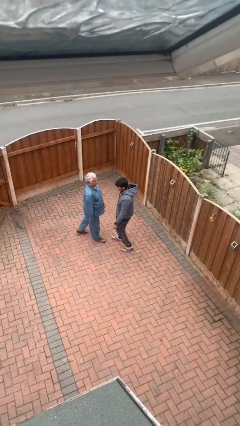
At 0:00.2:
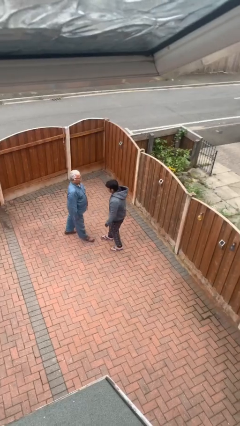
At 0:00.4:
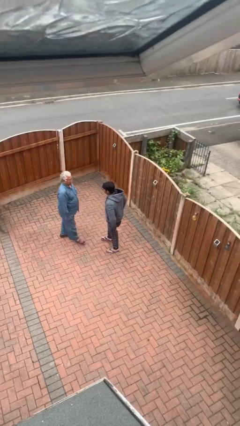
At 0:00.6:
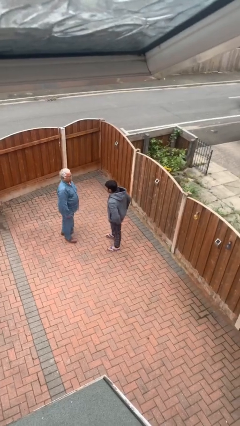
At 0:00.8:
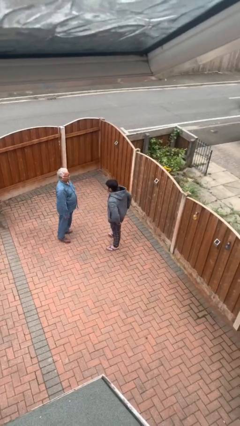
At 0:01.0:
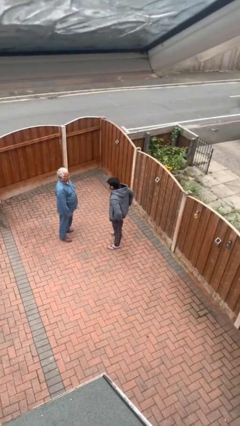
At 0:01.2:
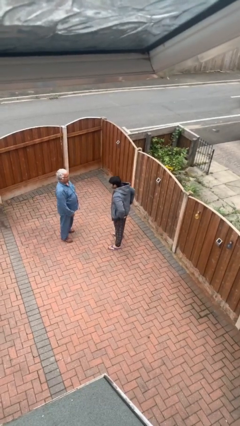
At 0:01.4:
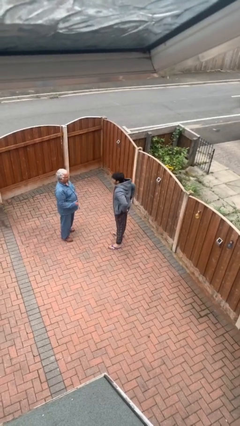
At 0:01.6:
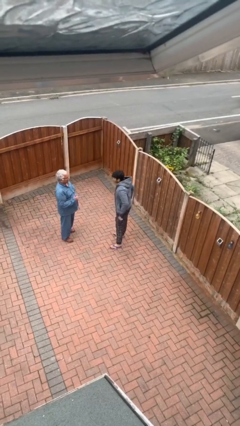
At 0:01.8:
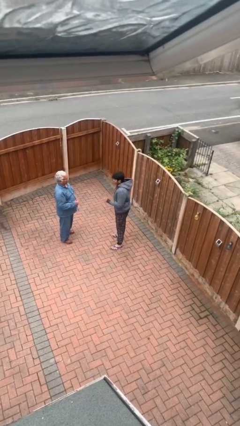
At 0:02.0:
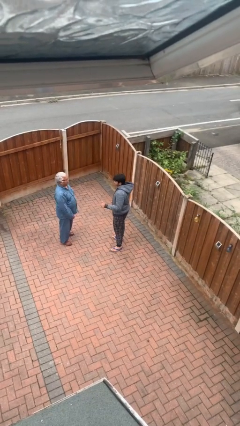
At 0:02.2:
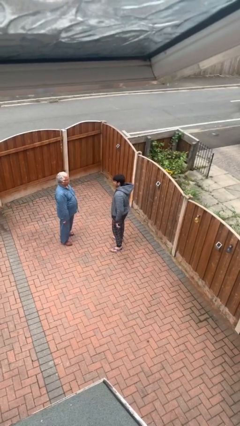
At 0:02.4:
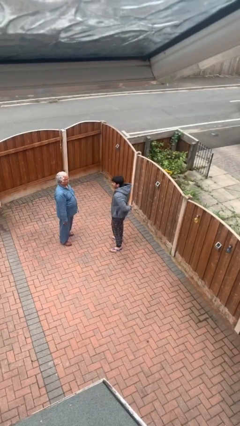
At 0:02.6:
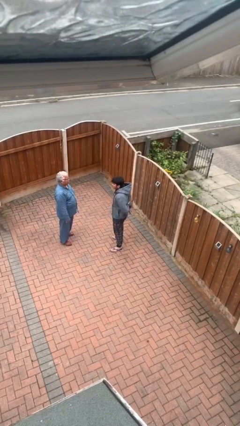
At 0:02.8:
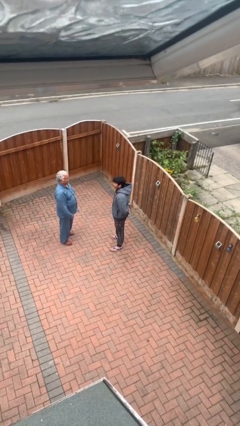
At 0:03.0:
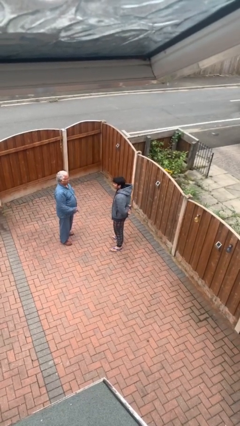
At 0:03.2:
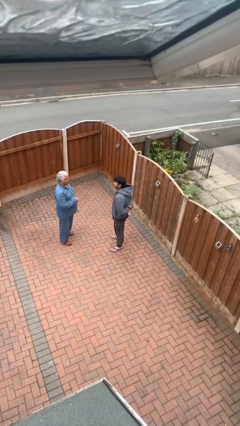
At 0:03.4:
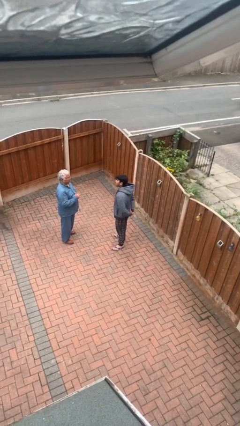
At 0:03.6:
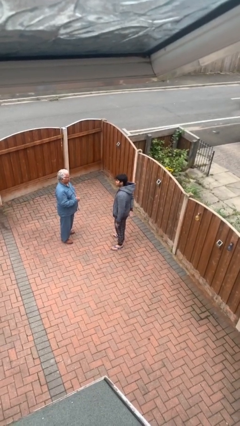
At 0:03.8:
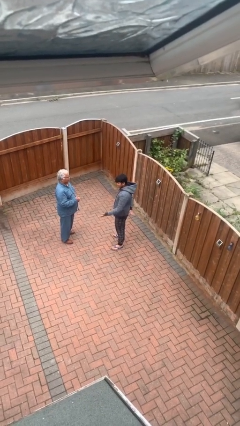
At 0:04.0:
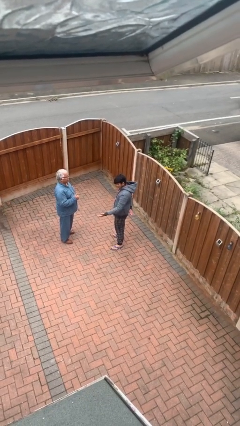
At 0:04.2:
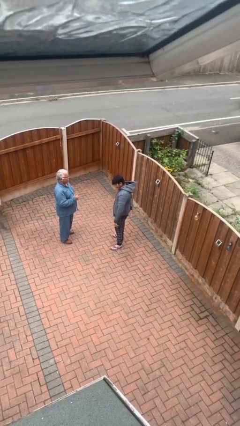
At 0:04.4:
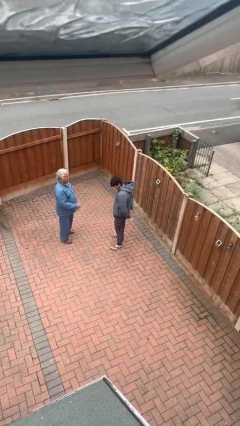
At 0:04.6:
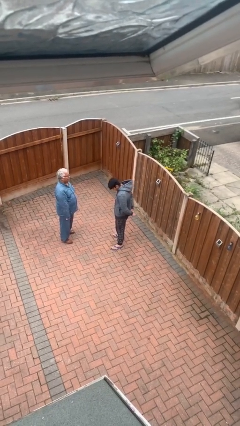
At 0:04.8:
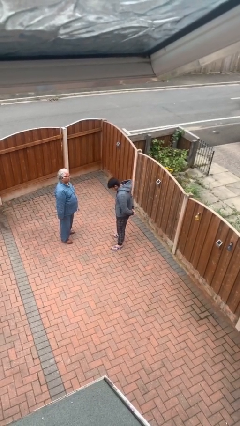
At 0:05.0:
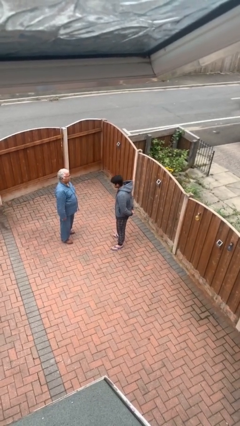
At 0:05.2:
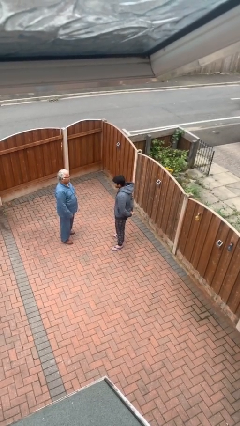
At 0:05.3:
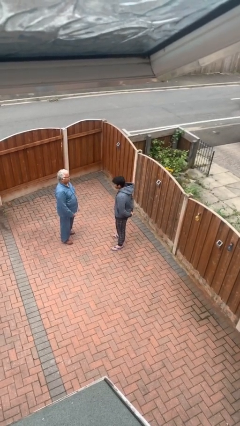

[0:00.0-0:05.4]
person talks to person

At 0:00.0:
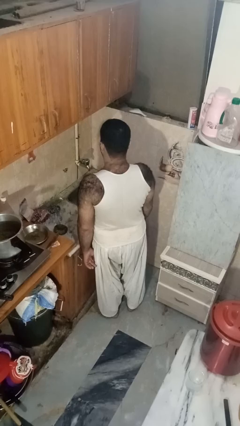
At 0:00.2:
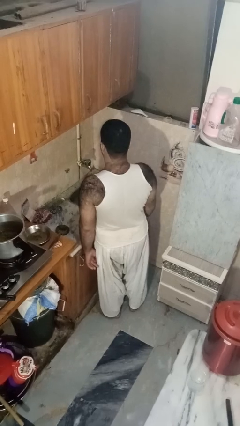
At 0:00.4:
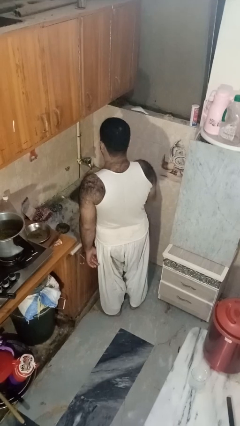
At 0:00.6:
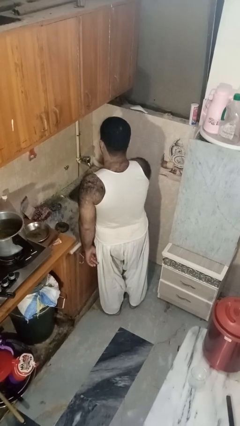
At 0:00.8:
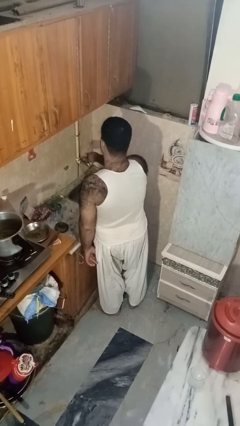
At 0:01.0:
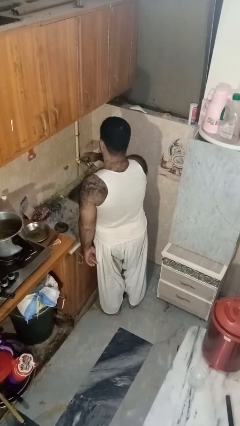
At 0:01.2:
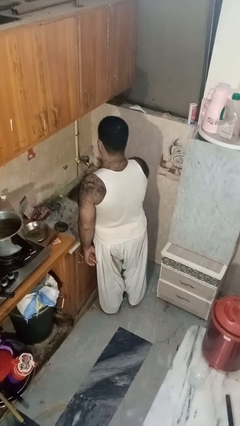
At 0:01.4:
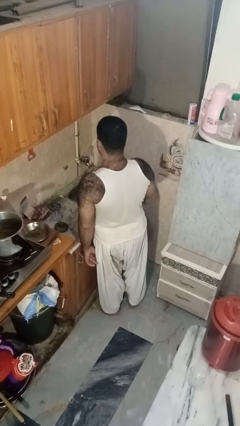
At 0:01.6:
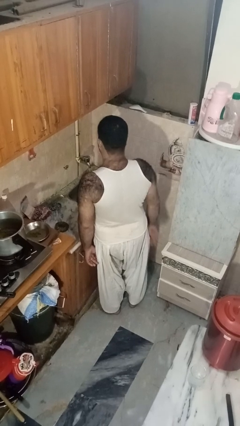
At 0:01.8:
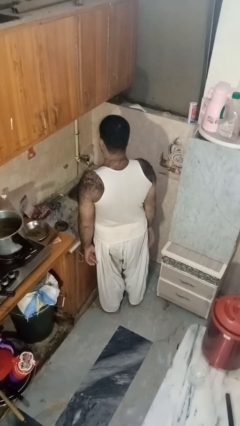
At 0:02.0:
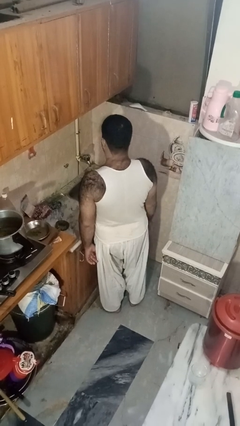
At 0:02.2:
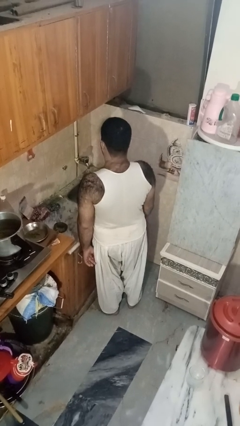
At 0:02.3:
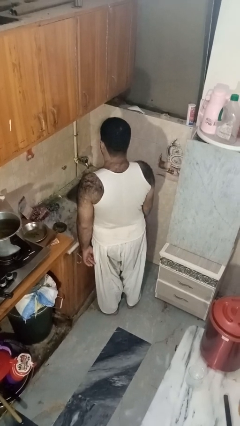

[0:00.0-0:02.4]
person turns on faucet

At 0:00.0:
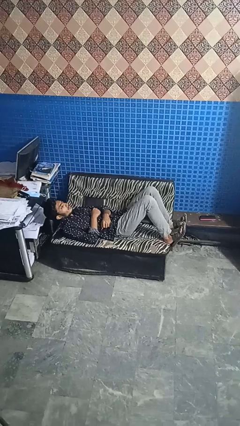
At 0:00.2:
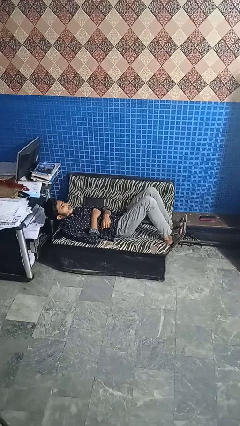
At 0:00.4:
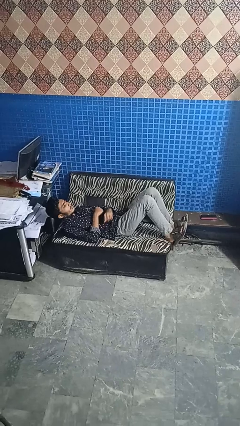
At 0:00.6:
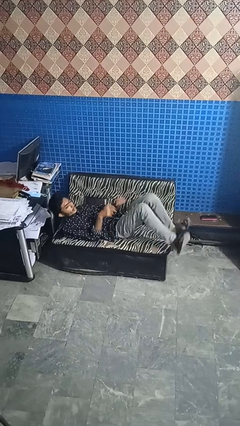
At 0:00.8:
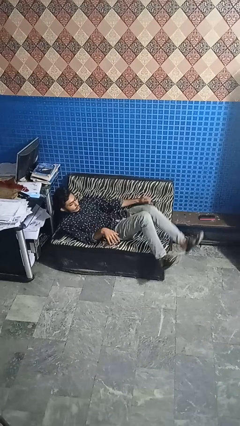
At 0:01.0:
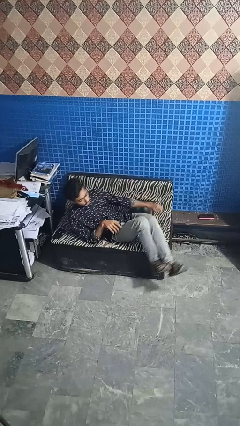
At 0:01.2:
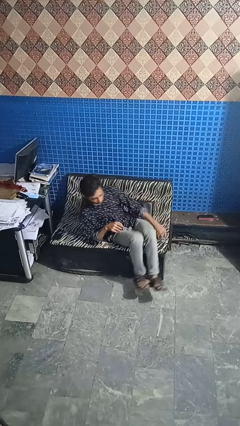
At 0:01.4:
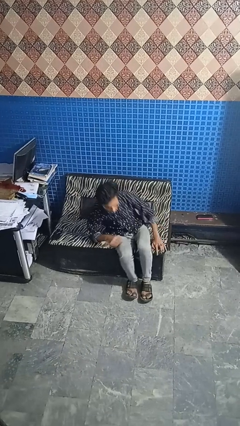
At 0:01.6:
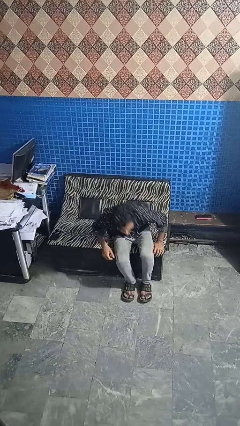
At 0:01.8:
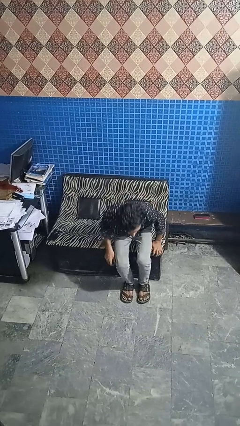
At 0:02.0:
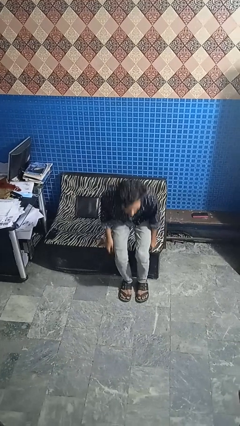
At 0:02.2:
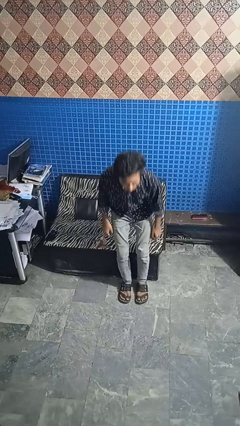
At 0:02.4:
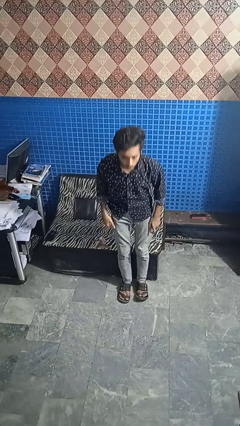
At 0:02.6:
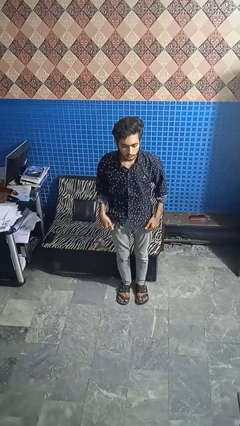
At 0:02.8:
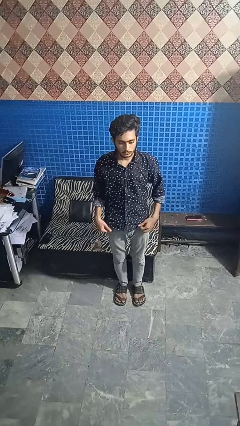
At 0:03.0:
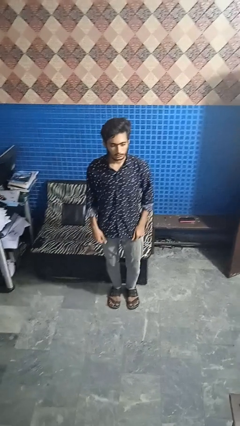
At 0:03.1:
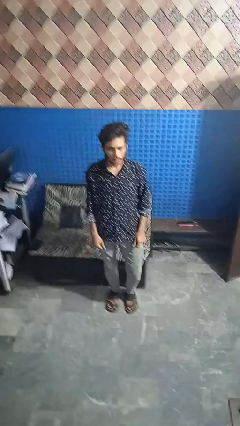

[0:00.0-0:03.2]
person stands up

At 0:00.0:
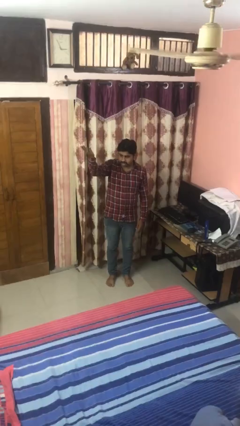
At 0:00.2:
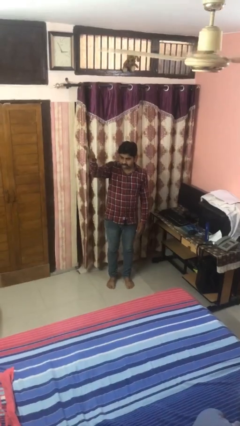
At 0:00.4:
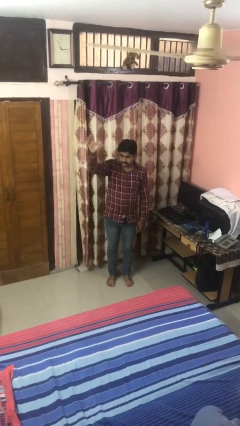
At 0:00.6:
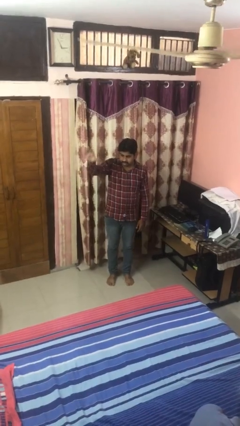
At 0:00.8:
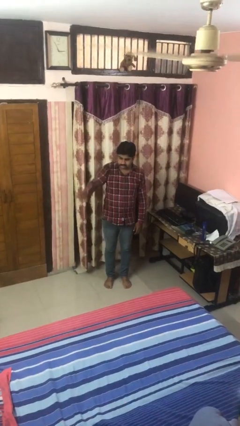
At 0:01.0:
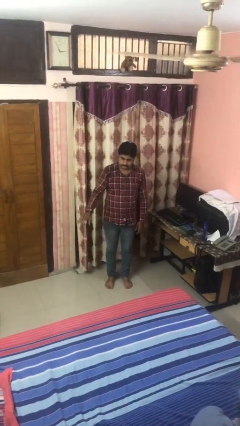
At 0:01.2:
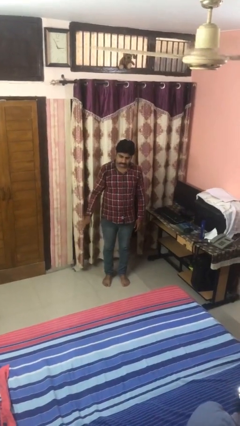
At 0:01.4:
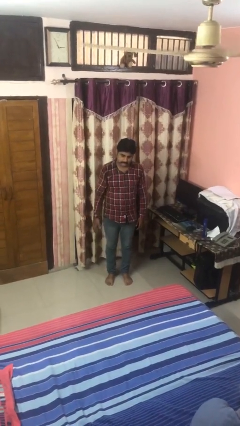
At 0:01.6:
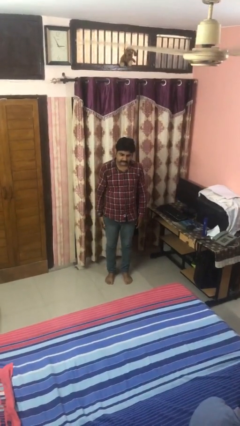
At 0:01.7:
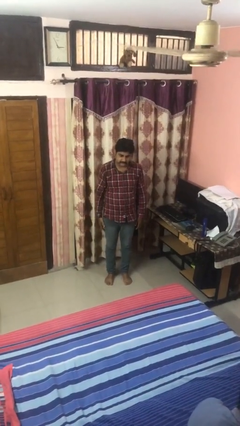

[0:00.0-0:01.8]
person gestures swipe down

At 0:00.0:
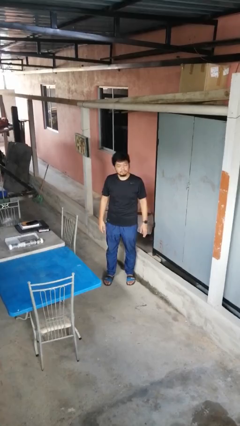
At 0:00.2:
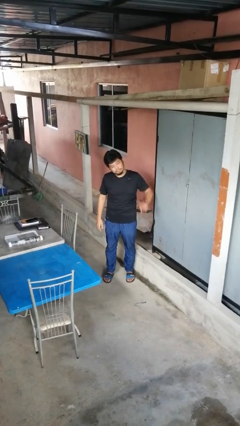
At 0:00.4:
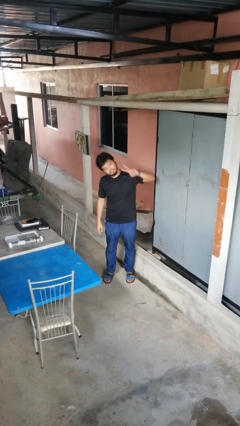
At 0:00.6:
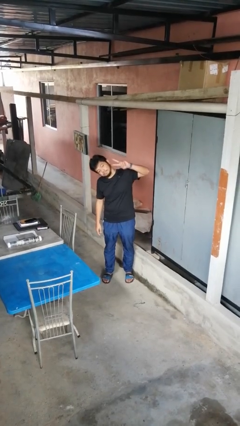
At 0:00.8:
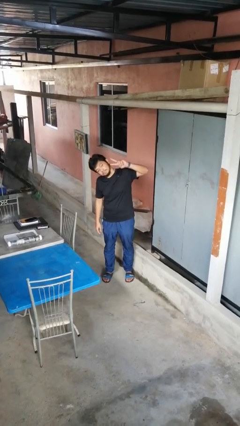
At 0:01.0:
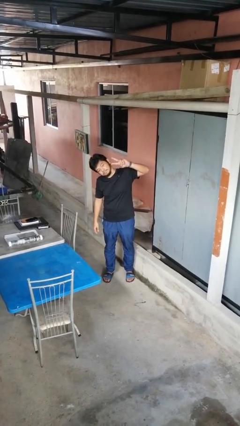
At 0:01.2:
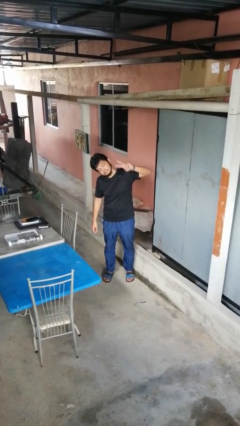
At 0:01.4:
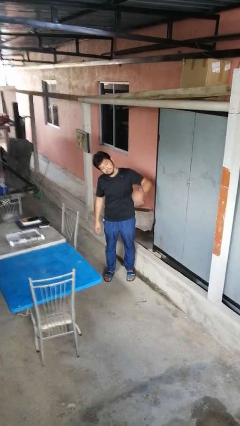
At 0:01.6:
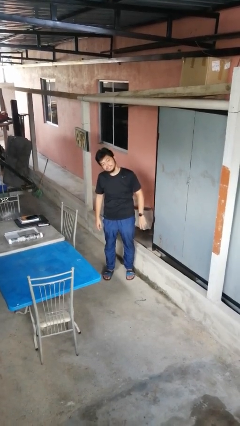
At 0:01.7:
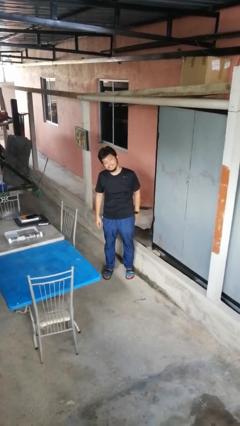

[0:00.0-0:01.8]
person gestures peace

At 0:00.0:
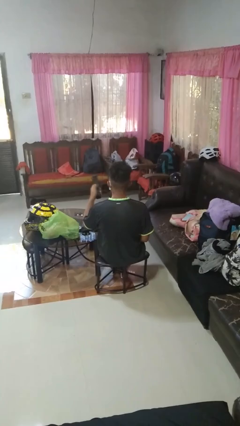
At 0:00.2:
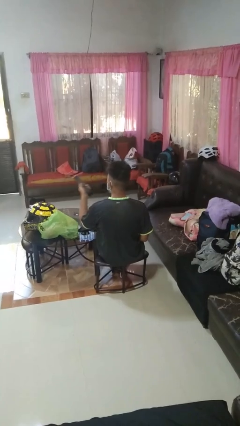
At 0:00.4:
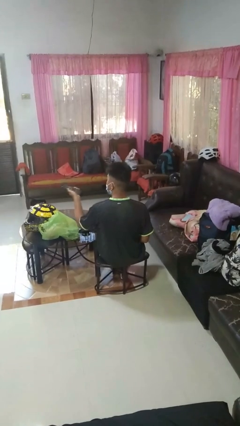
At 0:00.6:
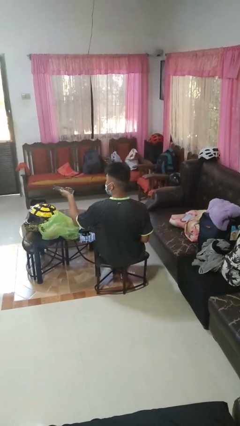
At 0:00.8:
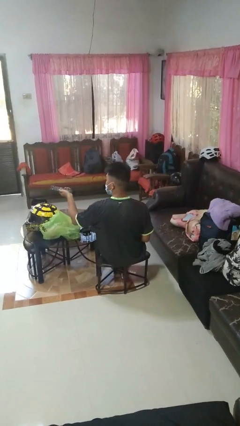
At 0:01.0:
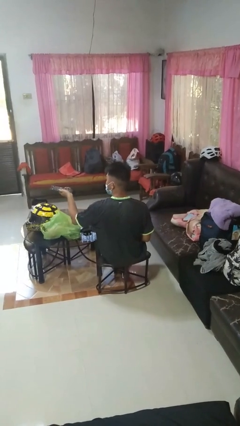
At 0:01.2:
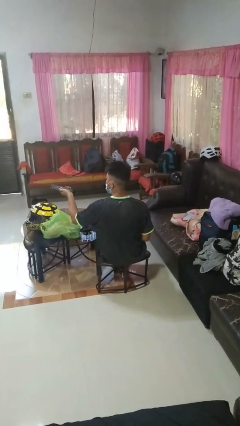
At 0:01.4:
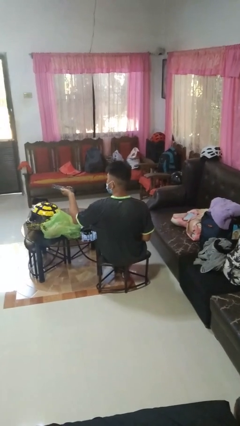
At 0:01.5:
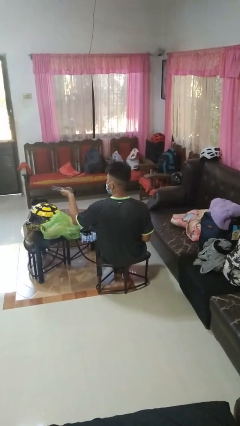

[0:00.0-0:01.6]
person uses television remote

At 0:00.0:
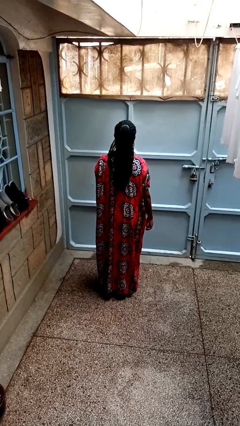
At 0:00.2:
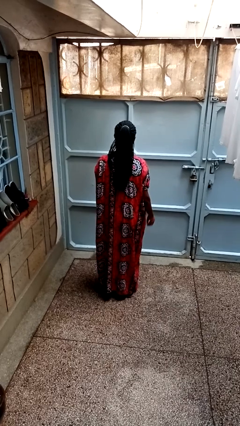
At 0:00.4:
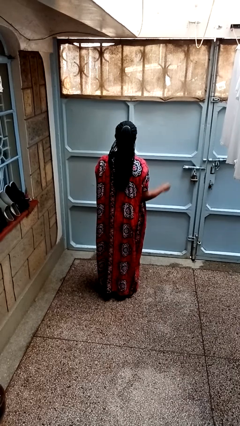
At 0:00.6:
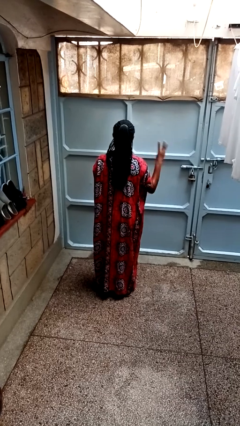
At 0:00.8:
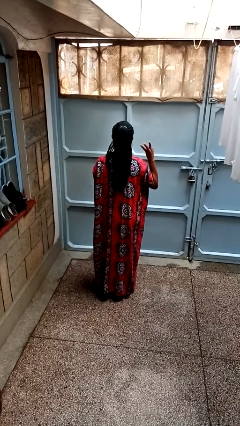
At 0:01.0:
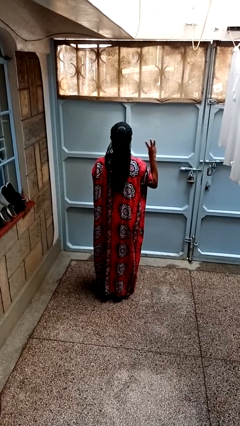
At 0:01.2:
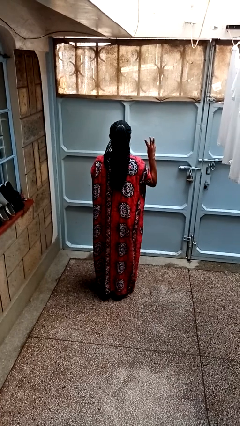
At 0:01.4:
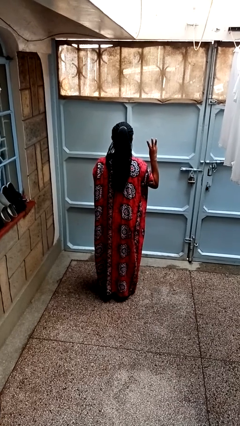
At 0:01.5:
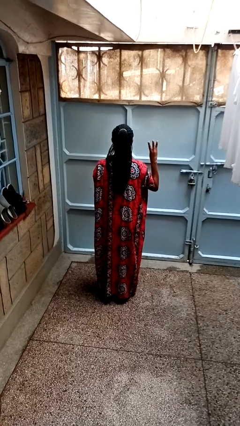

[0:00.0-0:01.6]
person gestures number three
